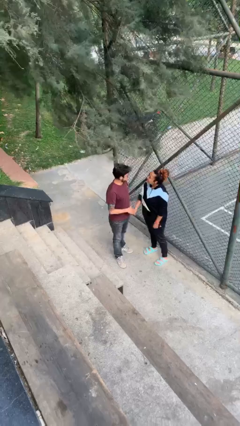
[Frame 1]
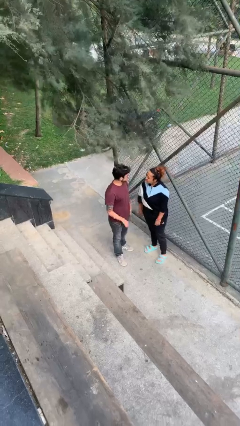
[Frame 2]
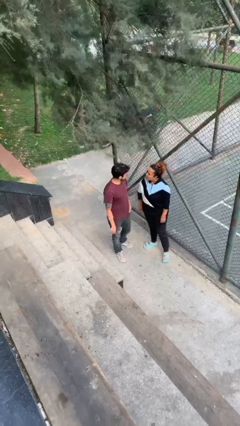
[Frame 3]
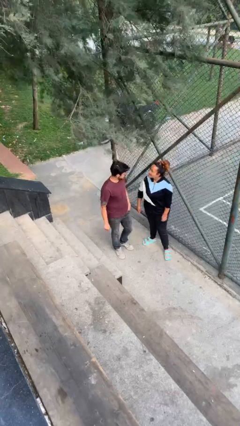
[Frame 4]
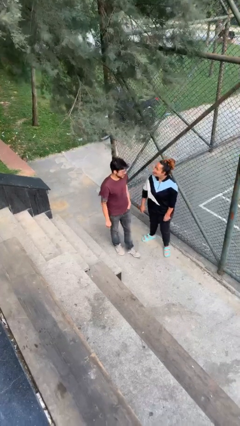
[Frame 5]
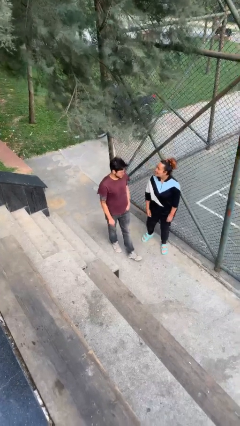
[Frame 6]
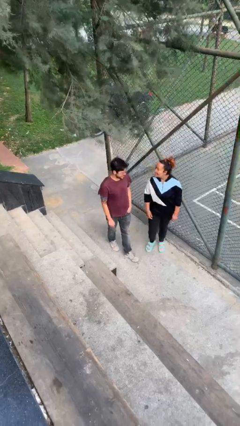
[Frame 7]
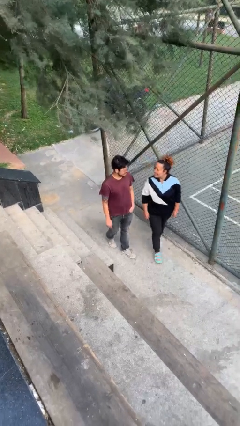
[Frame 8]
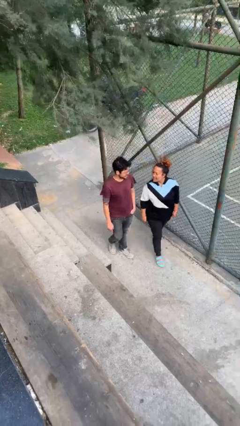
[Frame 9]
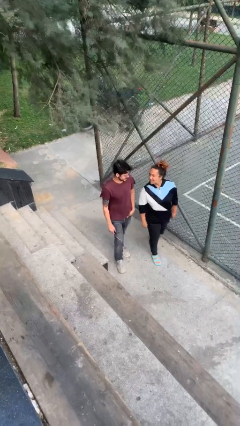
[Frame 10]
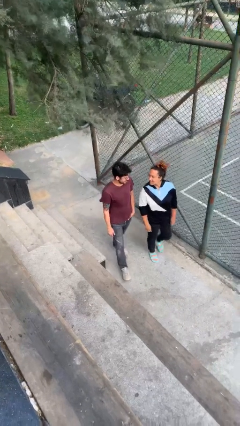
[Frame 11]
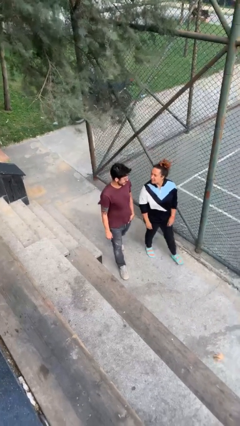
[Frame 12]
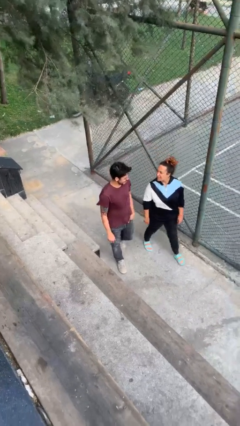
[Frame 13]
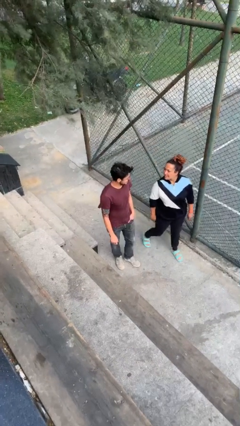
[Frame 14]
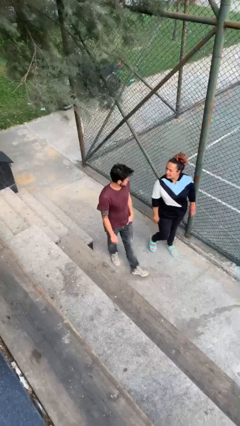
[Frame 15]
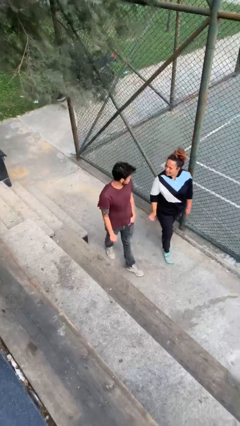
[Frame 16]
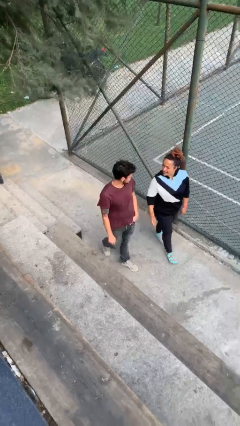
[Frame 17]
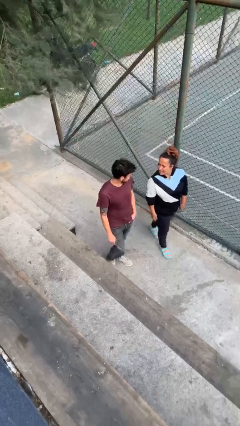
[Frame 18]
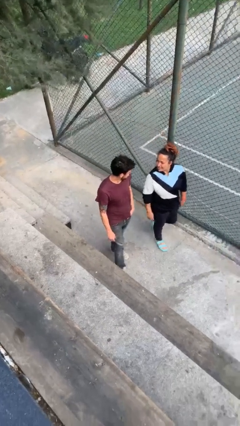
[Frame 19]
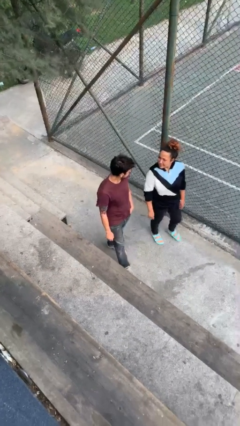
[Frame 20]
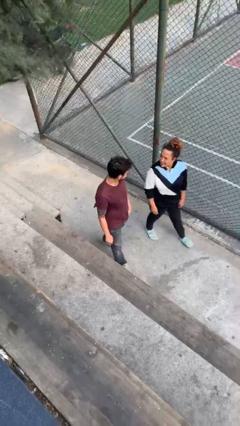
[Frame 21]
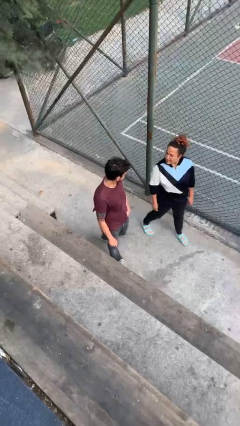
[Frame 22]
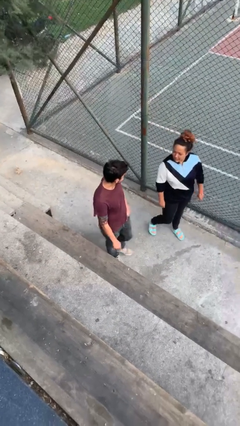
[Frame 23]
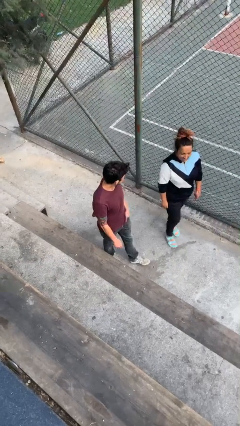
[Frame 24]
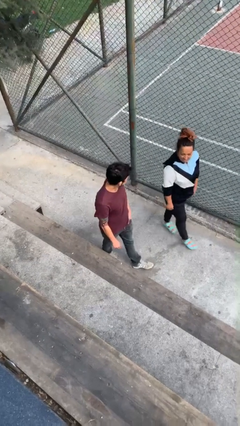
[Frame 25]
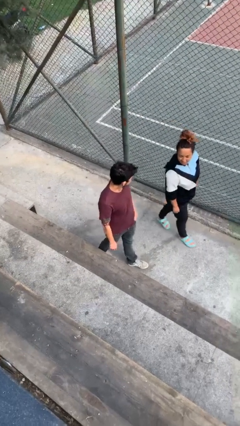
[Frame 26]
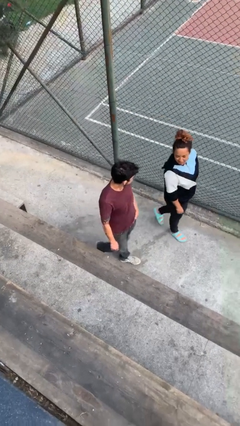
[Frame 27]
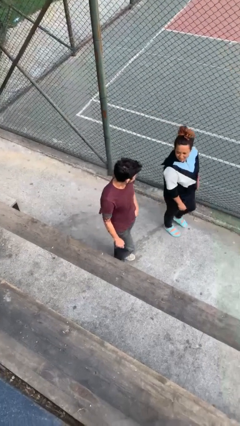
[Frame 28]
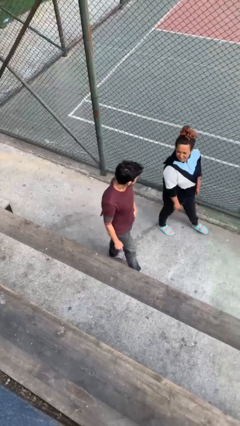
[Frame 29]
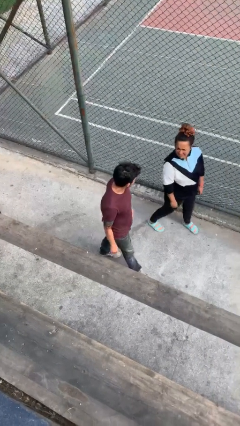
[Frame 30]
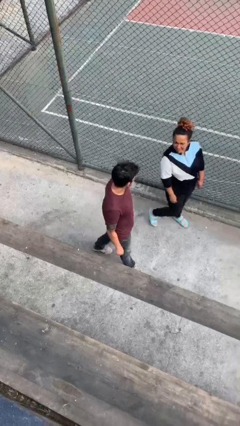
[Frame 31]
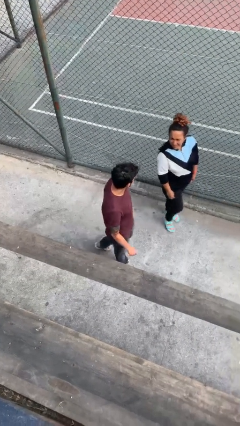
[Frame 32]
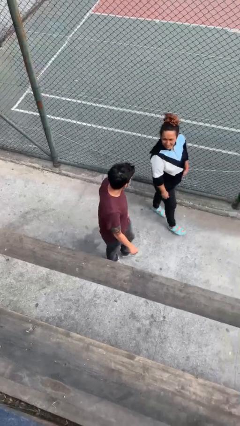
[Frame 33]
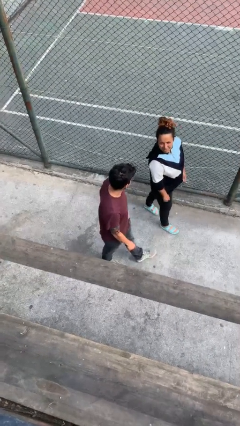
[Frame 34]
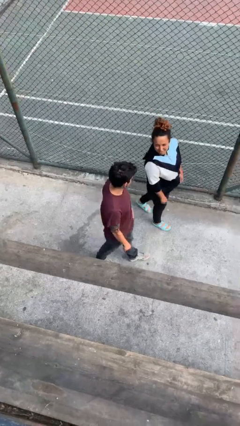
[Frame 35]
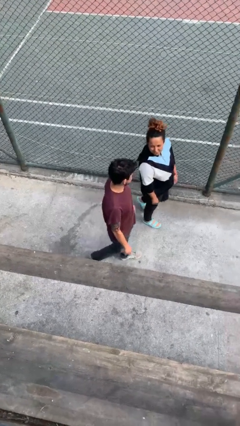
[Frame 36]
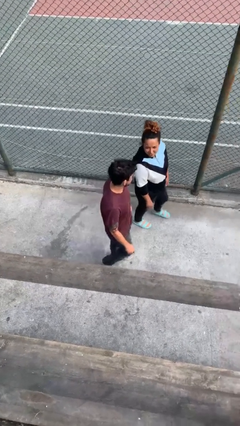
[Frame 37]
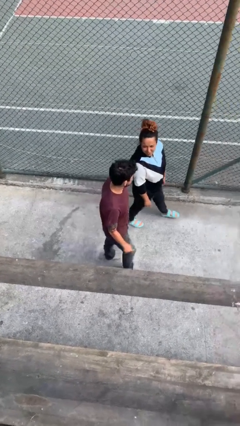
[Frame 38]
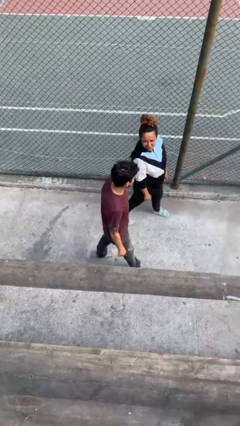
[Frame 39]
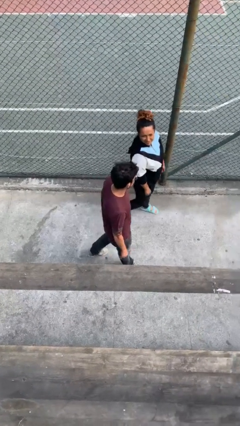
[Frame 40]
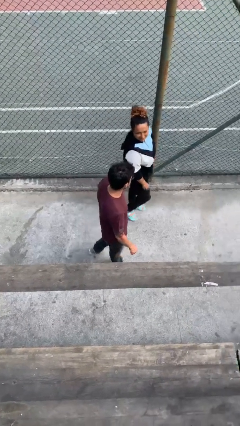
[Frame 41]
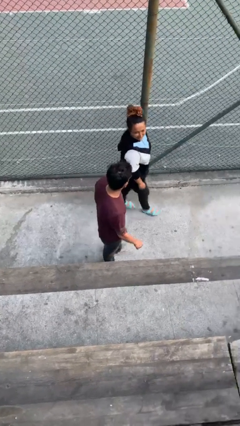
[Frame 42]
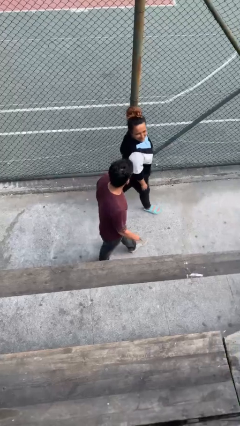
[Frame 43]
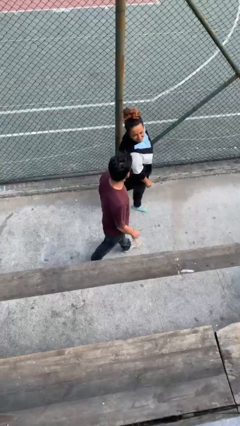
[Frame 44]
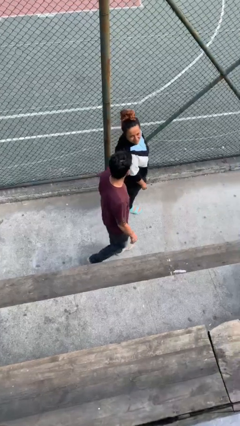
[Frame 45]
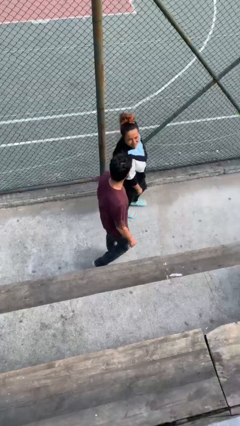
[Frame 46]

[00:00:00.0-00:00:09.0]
person talks to person

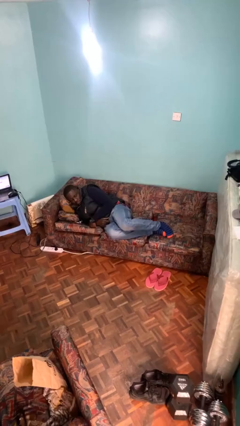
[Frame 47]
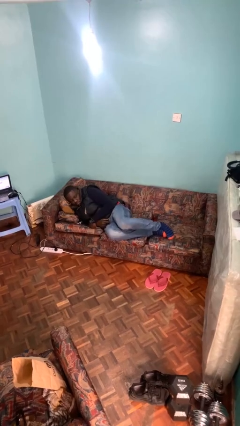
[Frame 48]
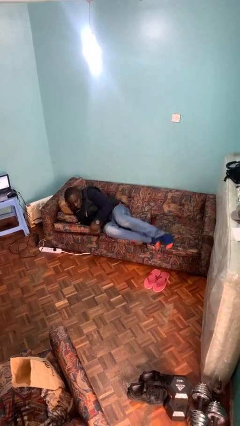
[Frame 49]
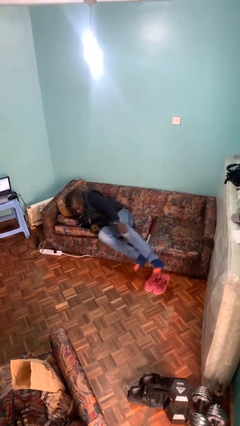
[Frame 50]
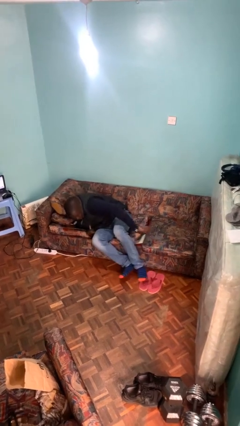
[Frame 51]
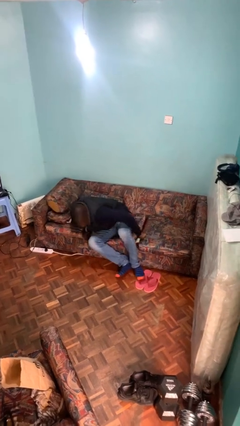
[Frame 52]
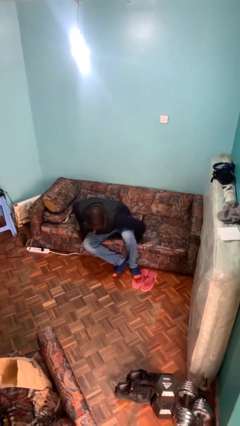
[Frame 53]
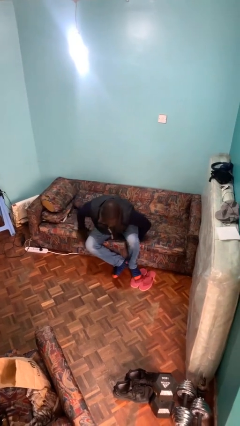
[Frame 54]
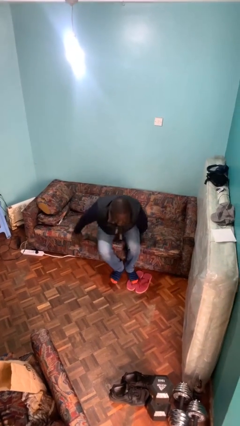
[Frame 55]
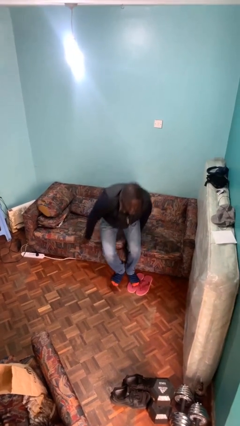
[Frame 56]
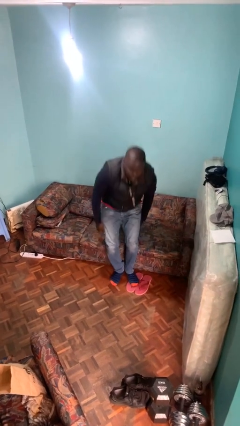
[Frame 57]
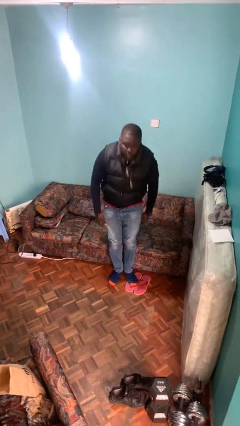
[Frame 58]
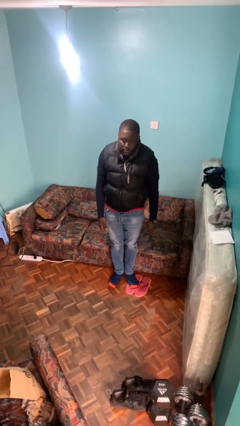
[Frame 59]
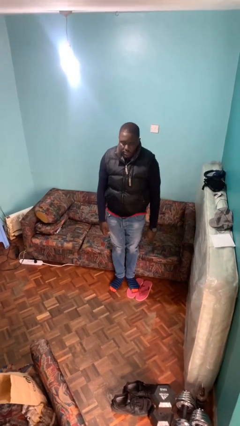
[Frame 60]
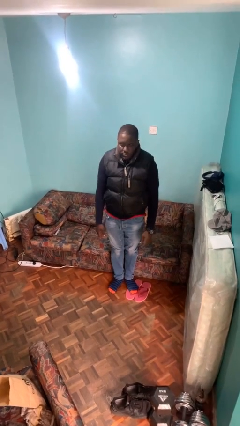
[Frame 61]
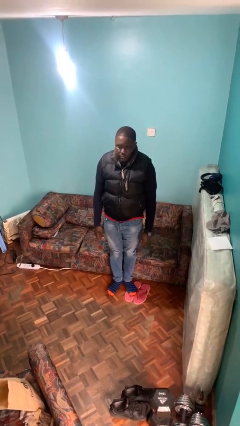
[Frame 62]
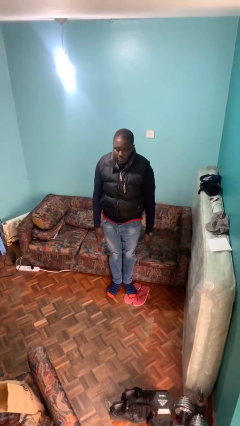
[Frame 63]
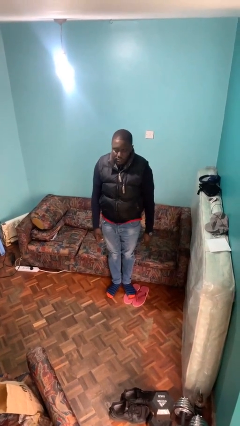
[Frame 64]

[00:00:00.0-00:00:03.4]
person stands up

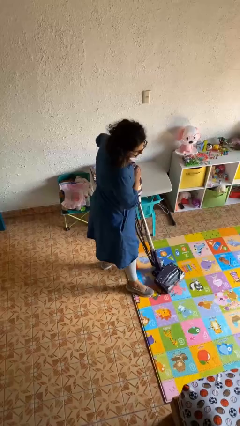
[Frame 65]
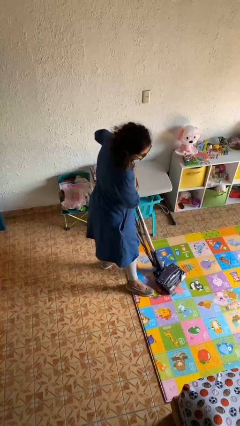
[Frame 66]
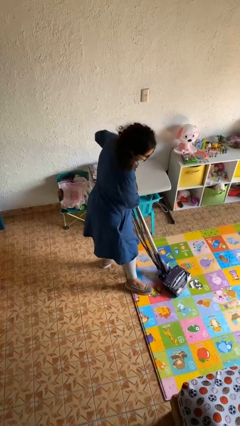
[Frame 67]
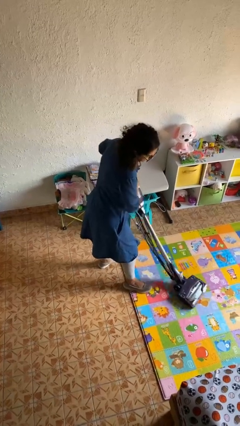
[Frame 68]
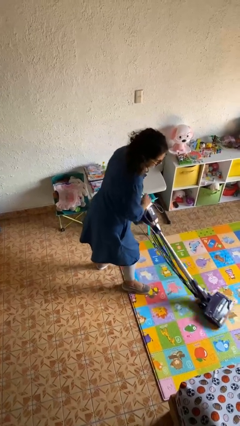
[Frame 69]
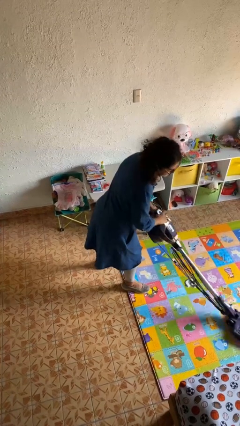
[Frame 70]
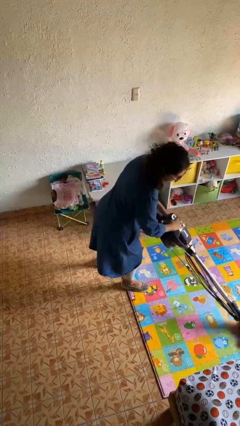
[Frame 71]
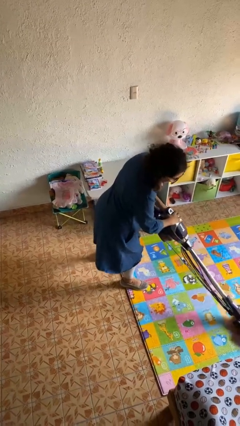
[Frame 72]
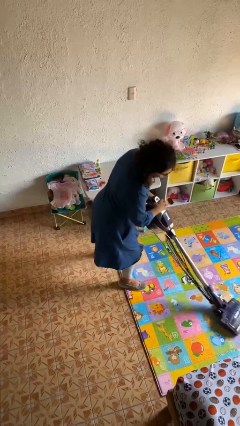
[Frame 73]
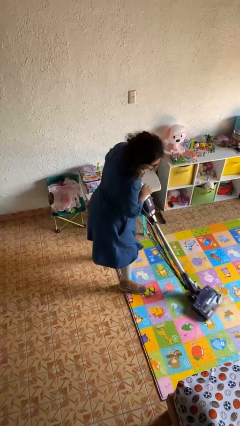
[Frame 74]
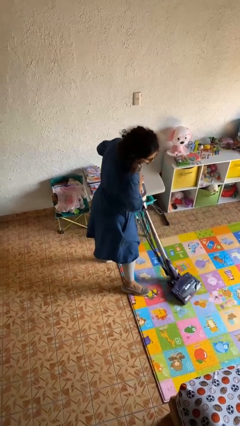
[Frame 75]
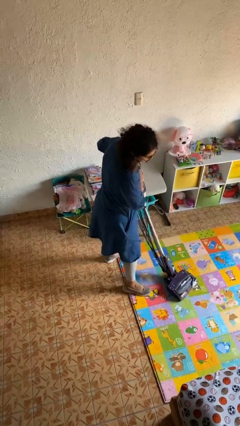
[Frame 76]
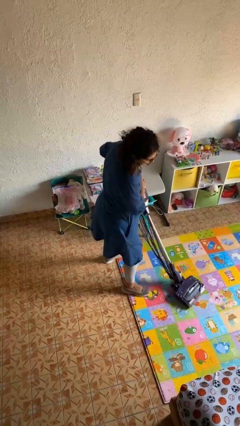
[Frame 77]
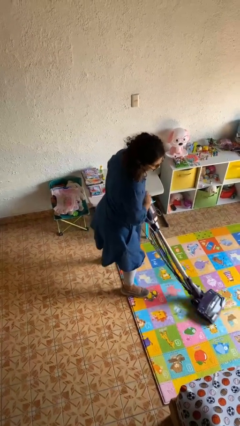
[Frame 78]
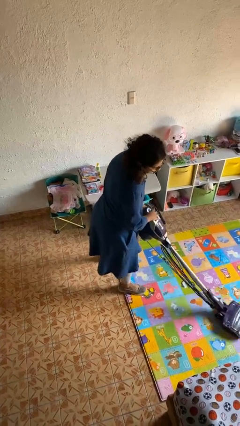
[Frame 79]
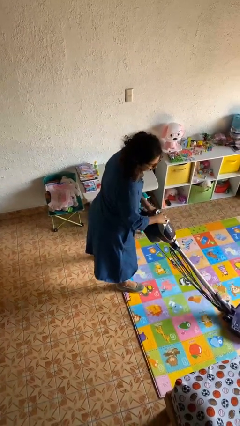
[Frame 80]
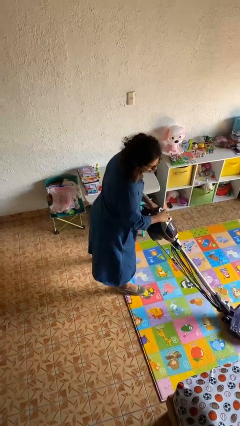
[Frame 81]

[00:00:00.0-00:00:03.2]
person vacuums carpet

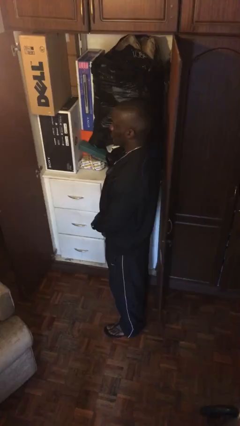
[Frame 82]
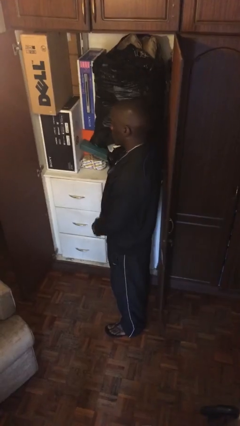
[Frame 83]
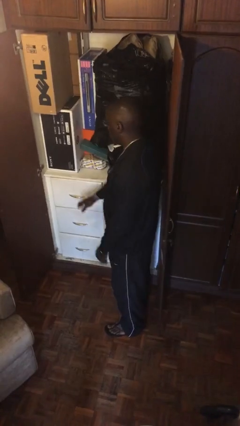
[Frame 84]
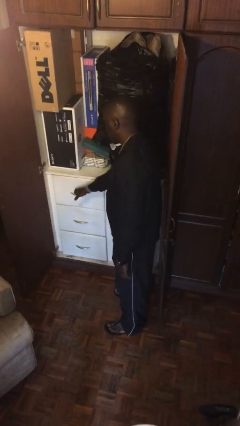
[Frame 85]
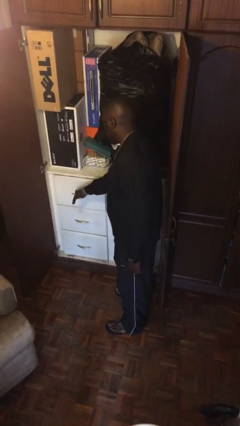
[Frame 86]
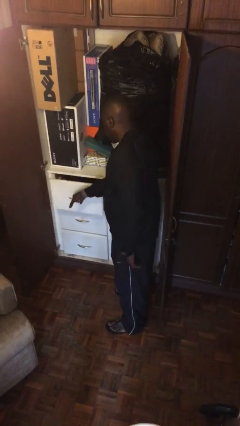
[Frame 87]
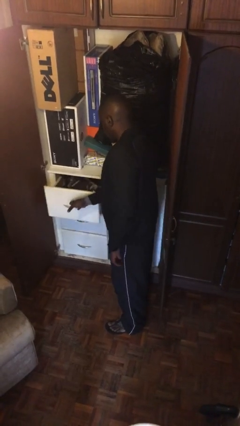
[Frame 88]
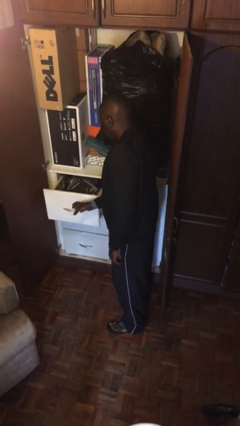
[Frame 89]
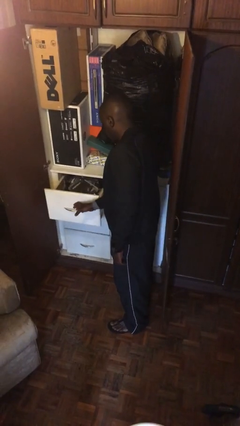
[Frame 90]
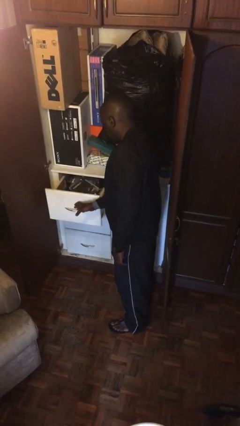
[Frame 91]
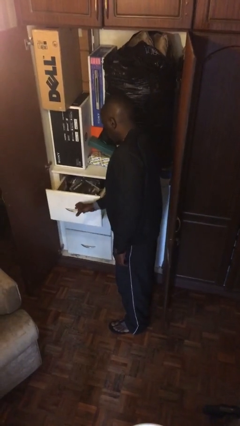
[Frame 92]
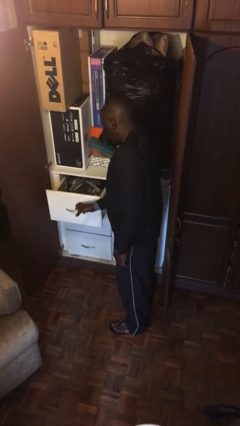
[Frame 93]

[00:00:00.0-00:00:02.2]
person opens dresser drawer

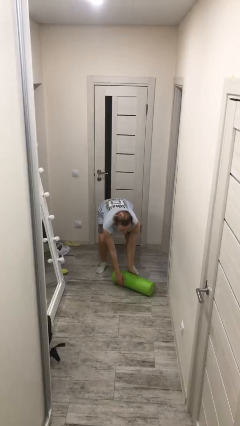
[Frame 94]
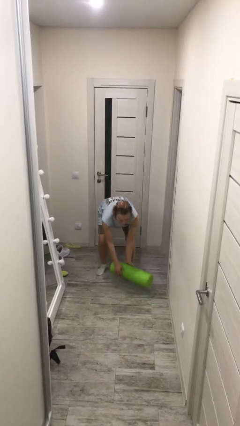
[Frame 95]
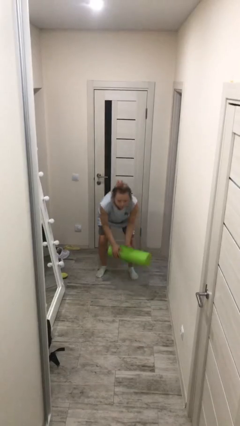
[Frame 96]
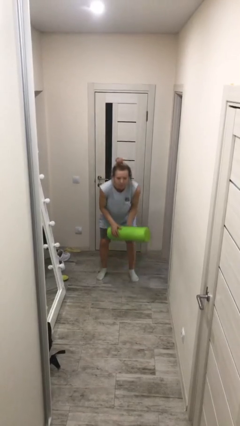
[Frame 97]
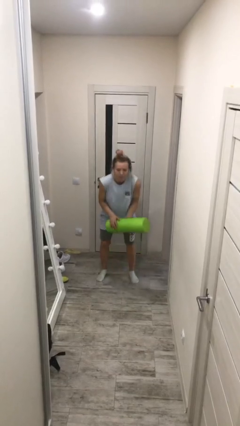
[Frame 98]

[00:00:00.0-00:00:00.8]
person picks up object from floor
